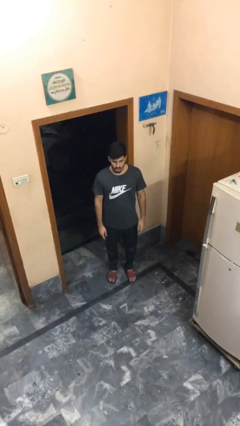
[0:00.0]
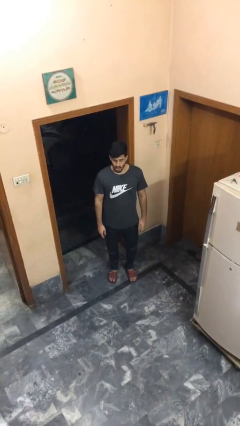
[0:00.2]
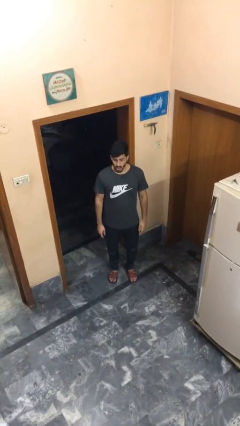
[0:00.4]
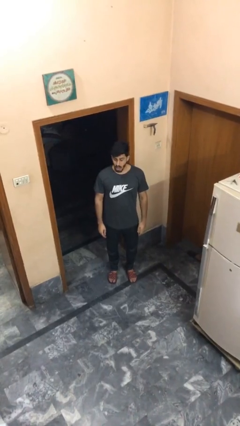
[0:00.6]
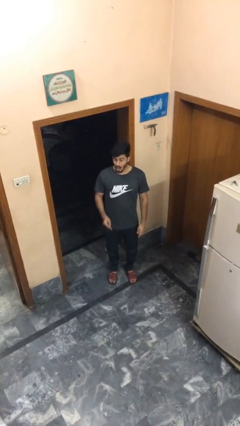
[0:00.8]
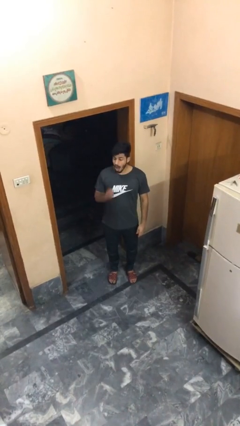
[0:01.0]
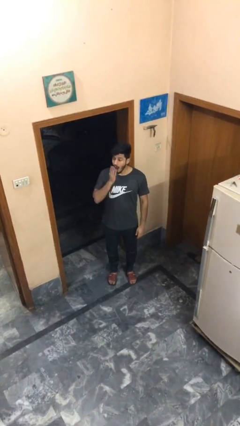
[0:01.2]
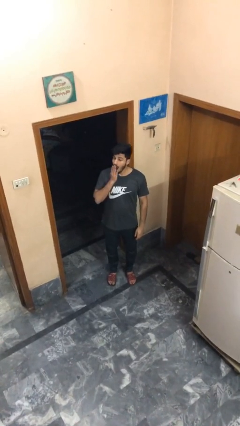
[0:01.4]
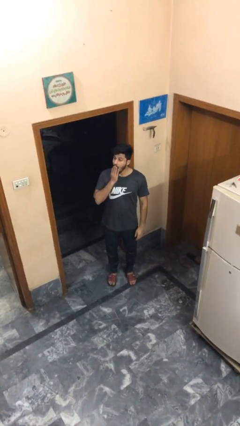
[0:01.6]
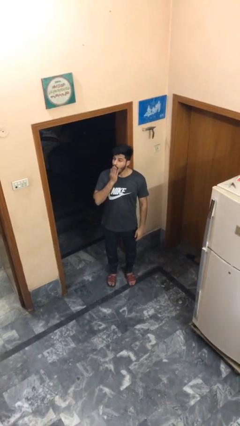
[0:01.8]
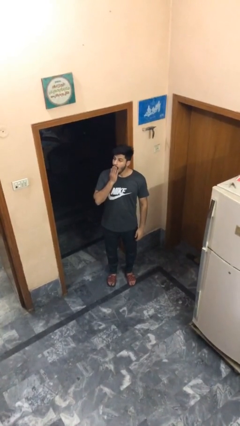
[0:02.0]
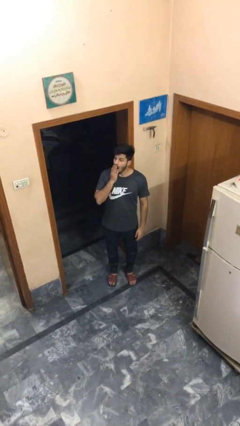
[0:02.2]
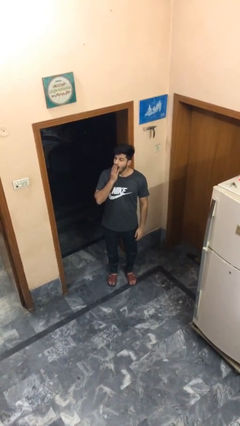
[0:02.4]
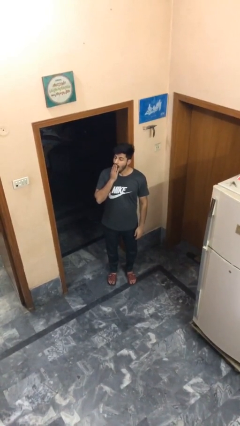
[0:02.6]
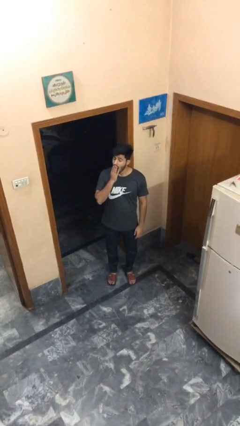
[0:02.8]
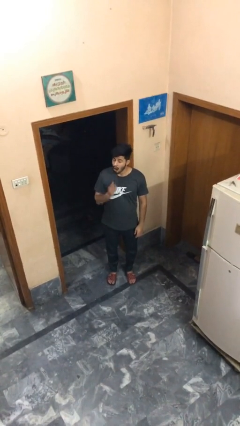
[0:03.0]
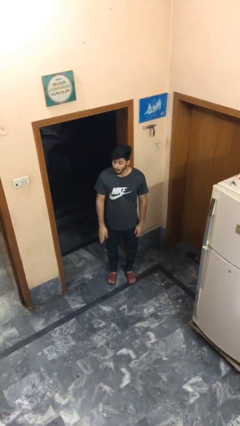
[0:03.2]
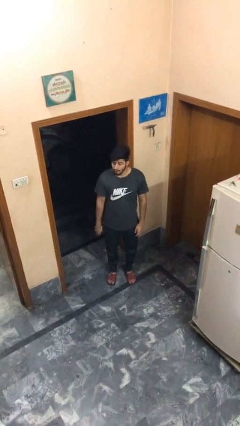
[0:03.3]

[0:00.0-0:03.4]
person yawns

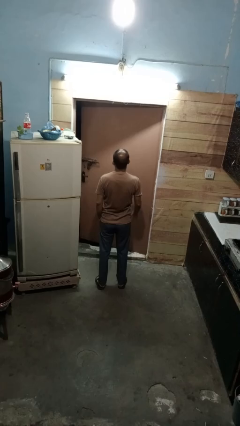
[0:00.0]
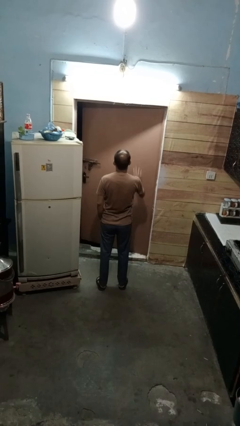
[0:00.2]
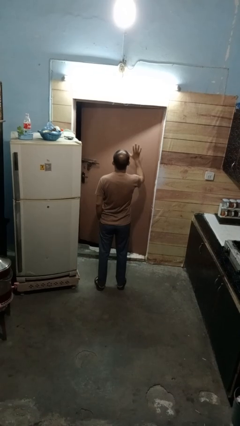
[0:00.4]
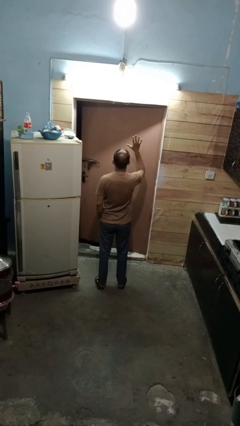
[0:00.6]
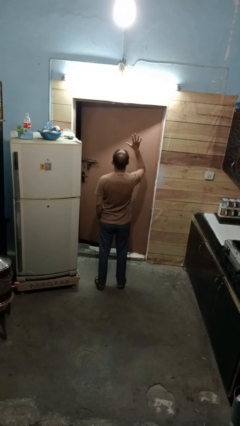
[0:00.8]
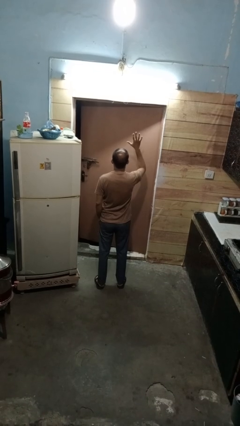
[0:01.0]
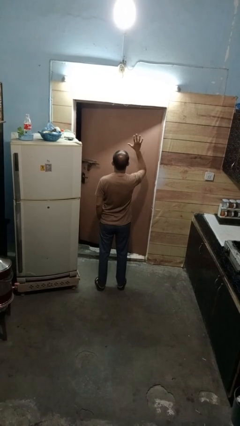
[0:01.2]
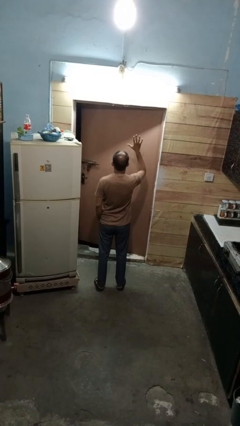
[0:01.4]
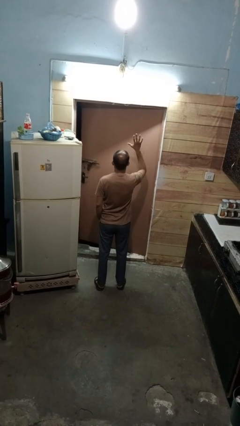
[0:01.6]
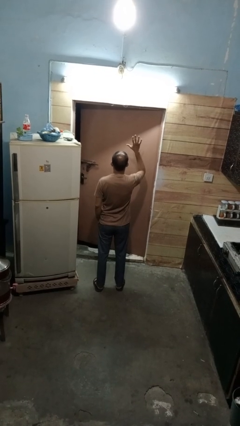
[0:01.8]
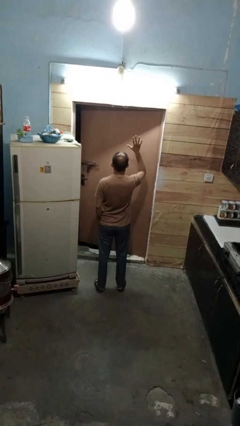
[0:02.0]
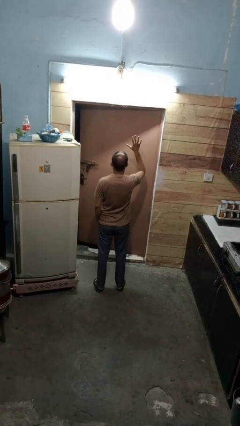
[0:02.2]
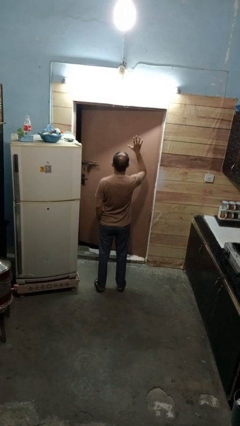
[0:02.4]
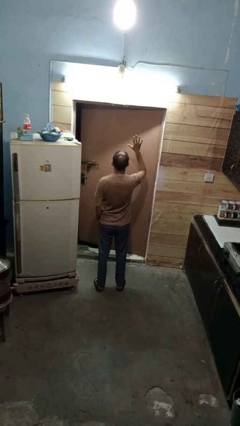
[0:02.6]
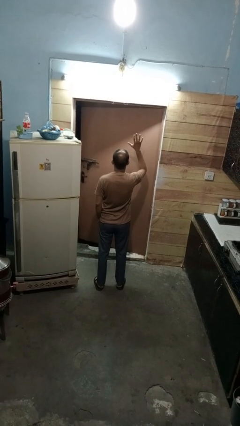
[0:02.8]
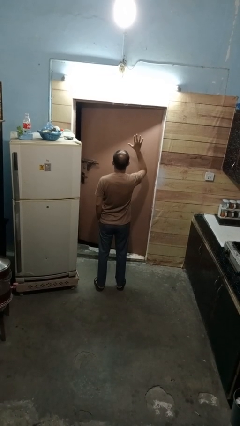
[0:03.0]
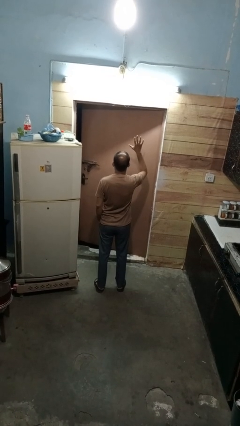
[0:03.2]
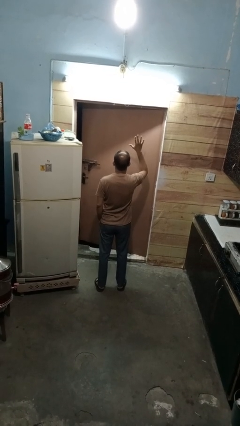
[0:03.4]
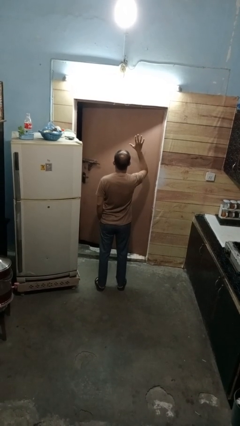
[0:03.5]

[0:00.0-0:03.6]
person gestures number five

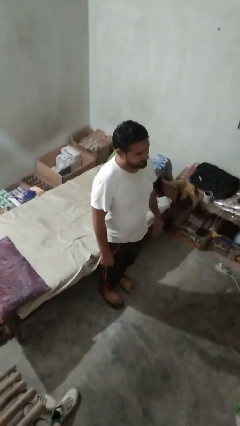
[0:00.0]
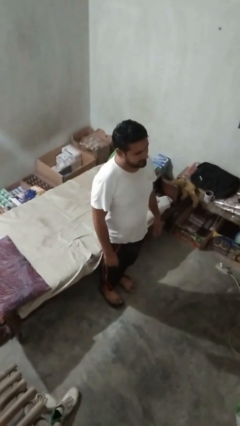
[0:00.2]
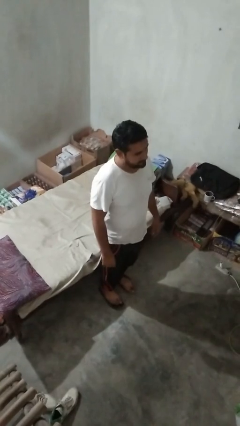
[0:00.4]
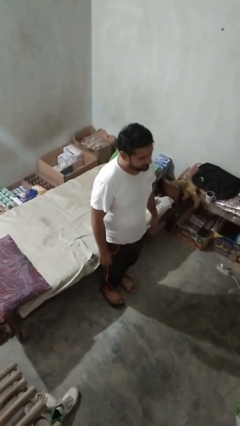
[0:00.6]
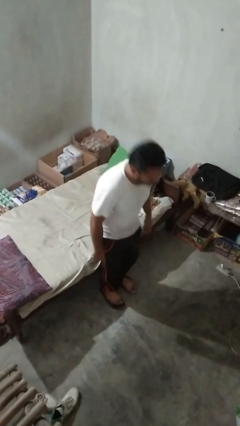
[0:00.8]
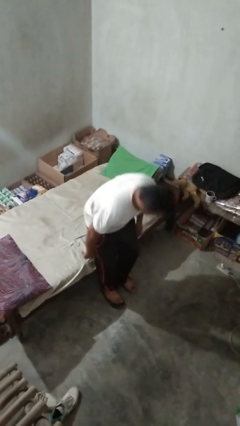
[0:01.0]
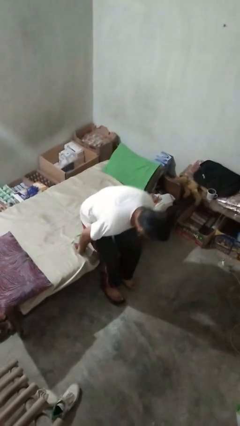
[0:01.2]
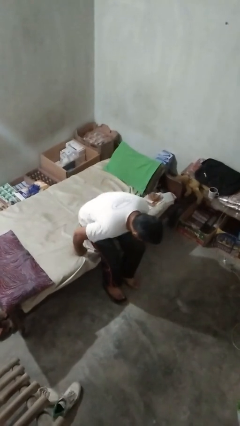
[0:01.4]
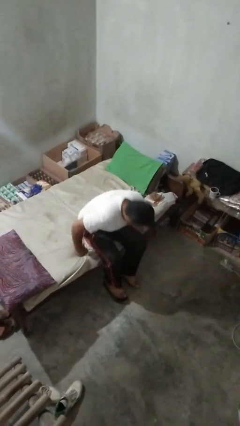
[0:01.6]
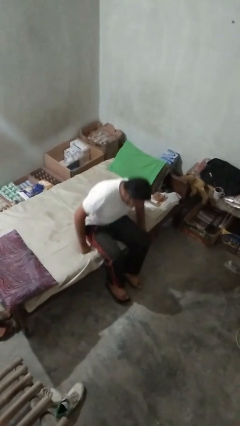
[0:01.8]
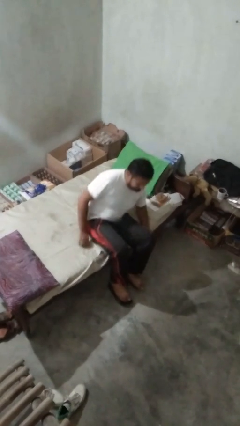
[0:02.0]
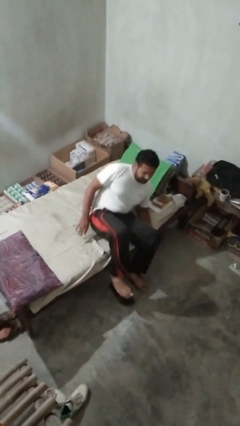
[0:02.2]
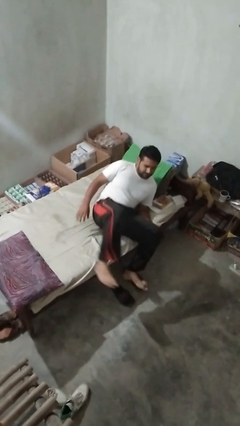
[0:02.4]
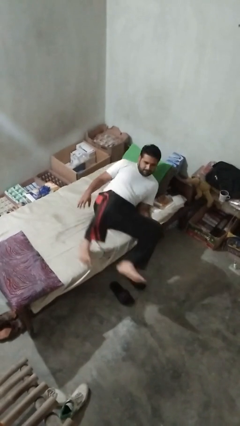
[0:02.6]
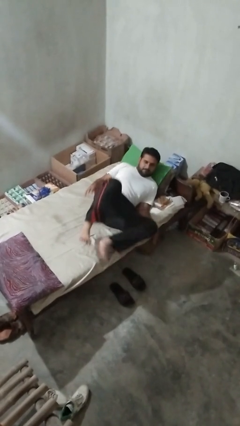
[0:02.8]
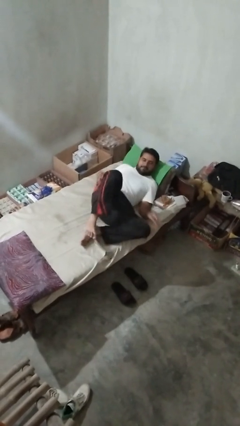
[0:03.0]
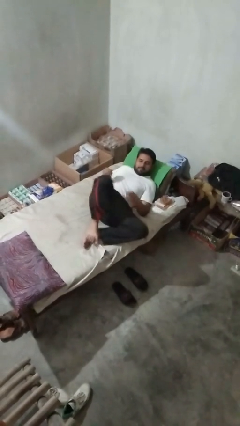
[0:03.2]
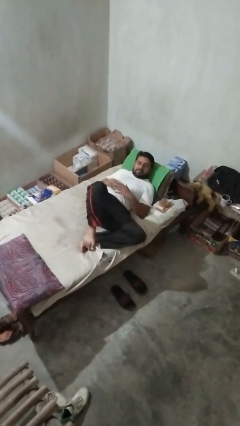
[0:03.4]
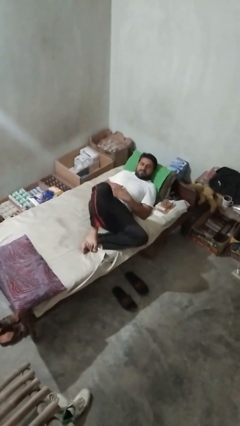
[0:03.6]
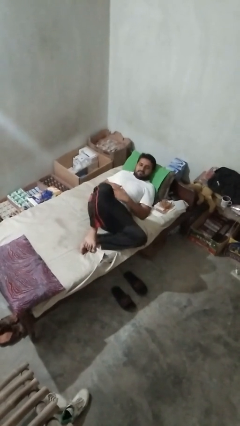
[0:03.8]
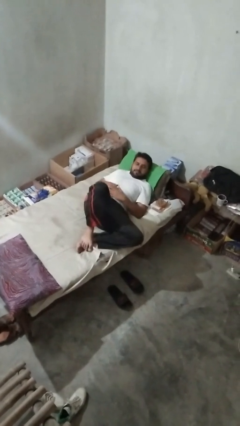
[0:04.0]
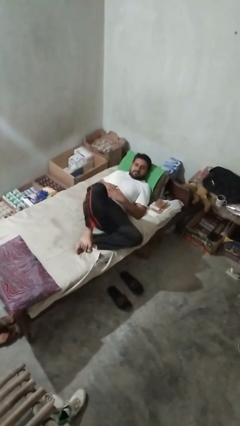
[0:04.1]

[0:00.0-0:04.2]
person lies down on bed

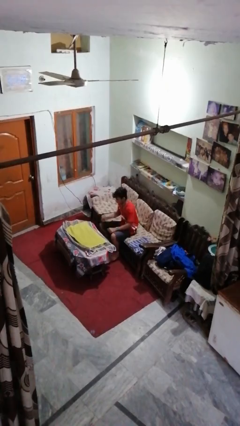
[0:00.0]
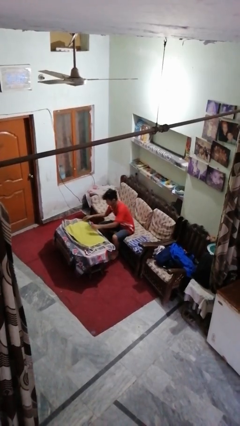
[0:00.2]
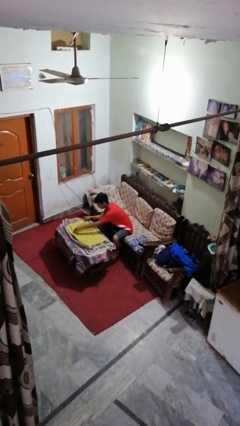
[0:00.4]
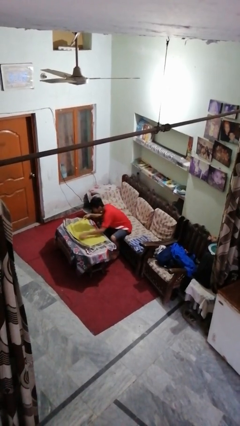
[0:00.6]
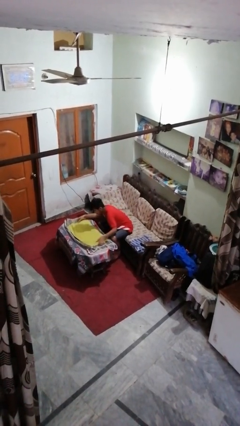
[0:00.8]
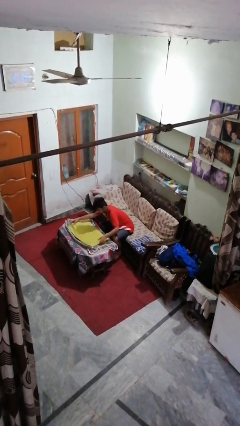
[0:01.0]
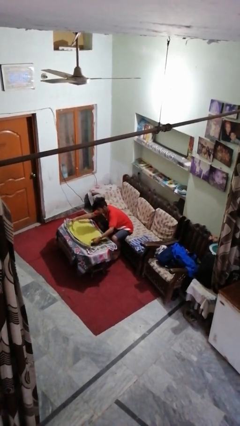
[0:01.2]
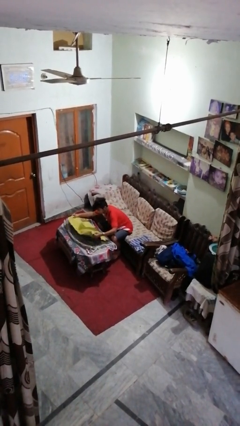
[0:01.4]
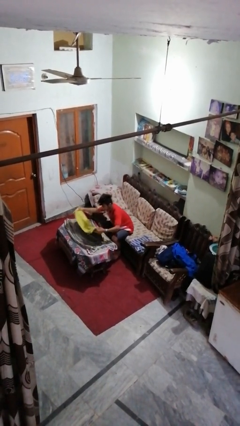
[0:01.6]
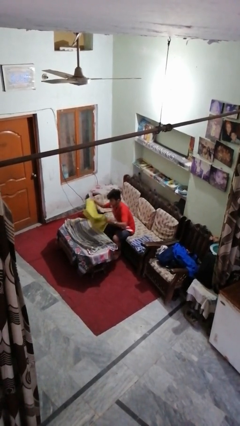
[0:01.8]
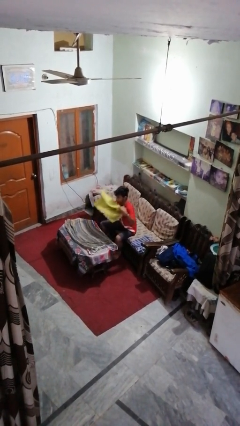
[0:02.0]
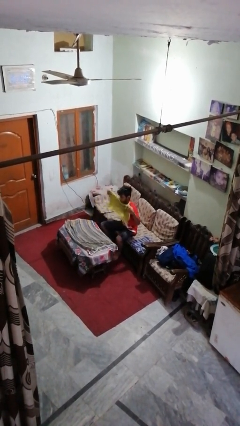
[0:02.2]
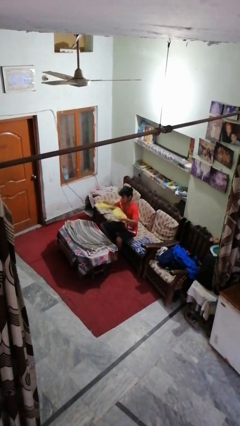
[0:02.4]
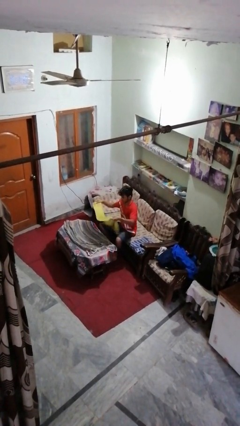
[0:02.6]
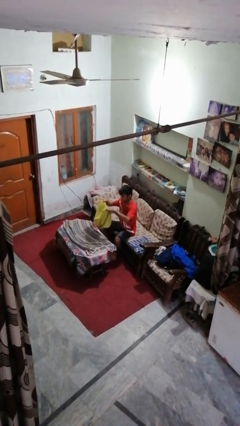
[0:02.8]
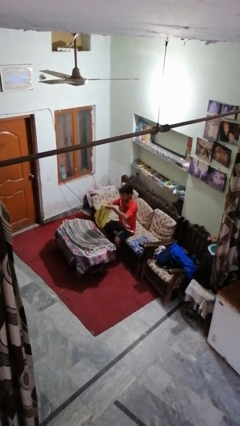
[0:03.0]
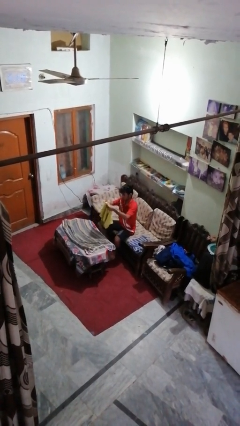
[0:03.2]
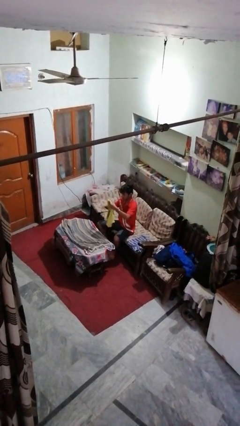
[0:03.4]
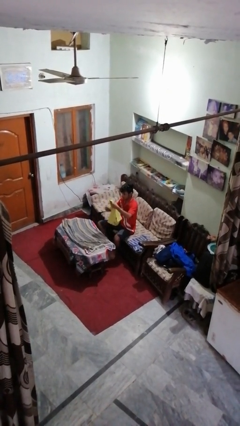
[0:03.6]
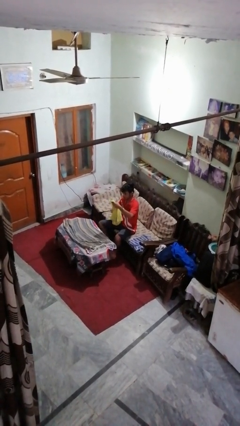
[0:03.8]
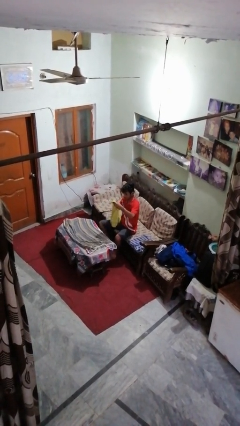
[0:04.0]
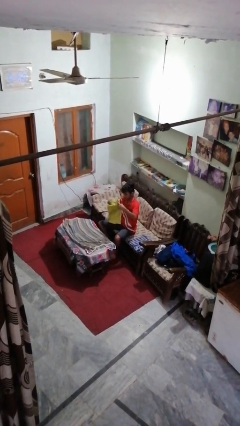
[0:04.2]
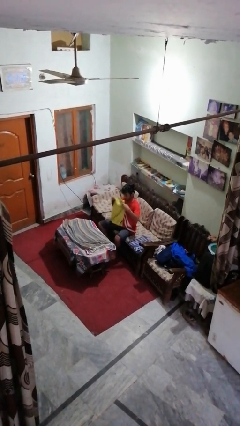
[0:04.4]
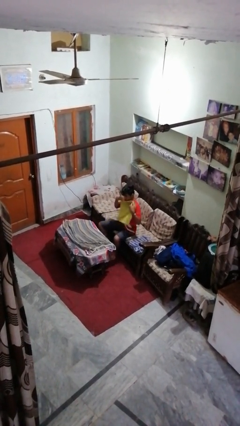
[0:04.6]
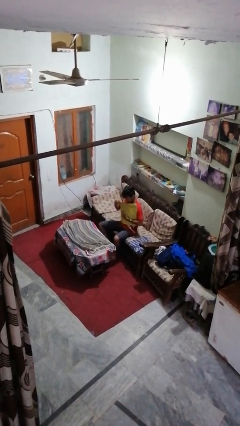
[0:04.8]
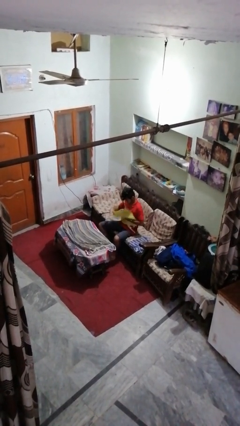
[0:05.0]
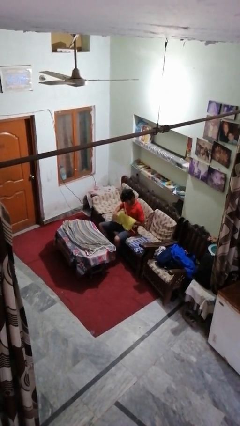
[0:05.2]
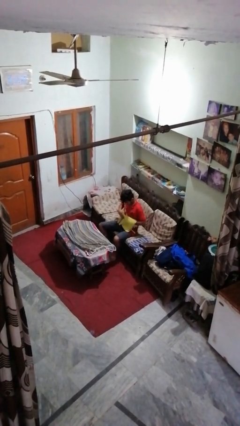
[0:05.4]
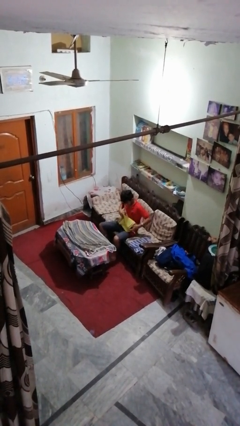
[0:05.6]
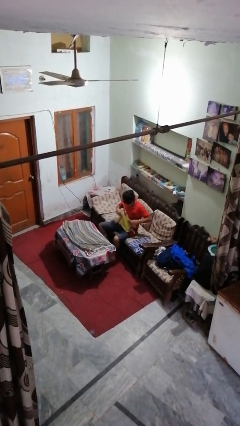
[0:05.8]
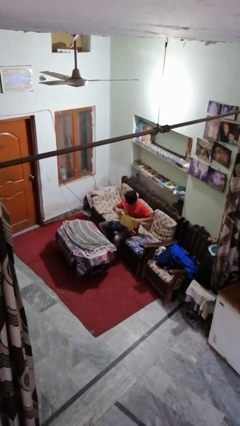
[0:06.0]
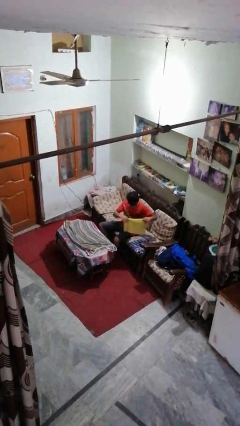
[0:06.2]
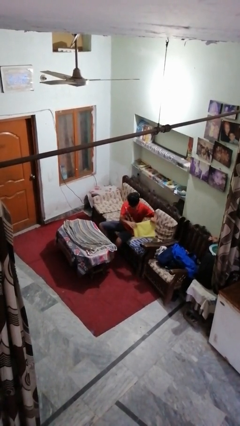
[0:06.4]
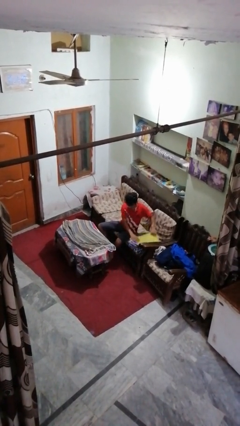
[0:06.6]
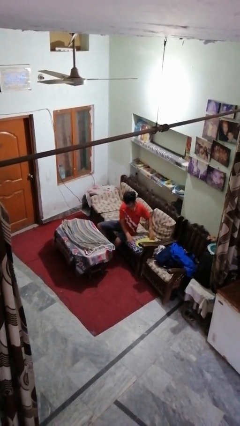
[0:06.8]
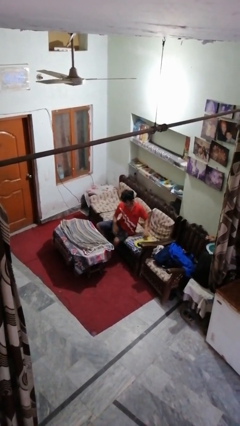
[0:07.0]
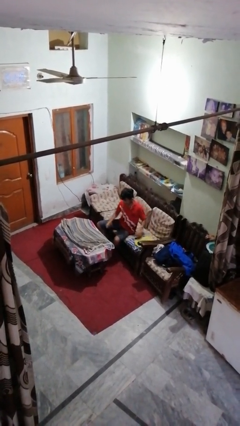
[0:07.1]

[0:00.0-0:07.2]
person folds towel
